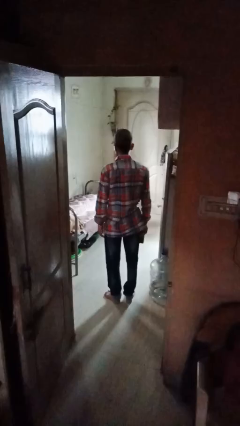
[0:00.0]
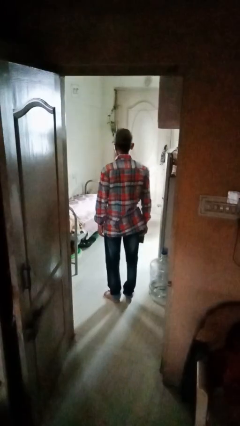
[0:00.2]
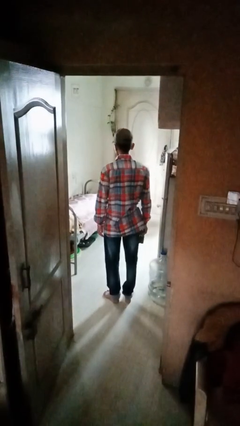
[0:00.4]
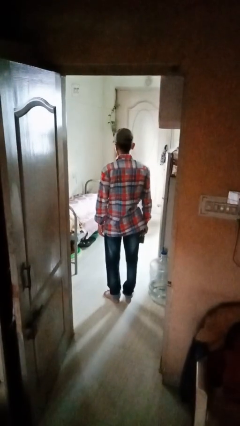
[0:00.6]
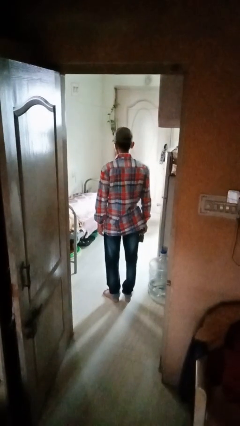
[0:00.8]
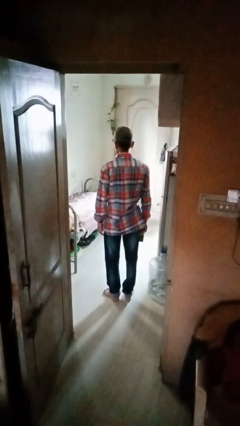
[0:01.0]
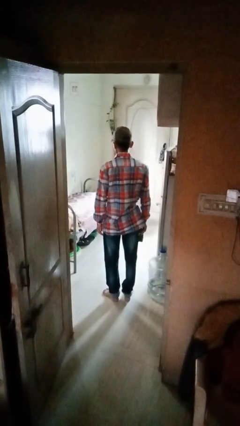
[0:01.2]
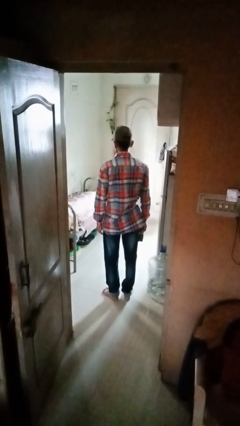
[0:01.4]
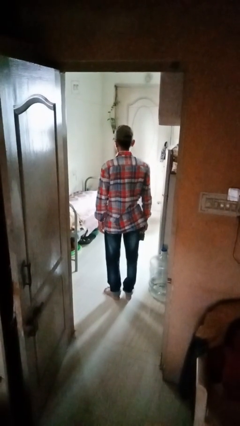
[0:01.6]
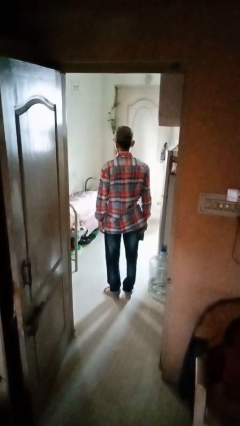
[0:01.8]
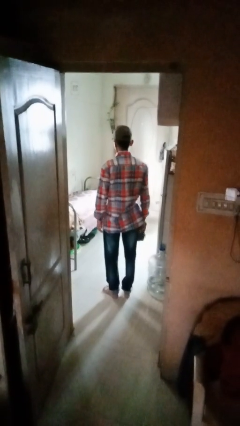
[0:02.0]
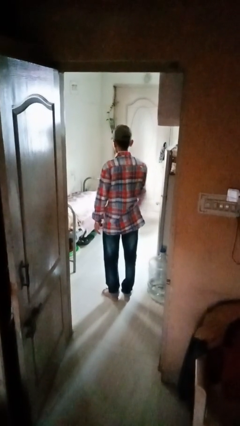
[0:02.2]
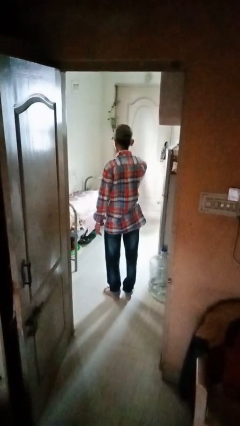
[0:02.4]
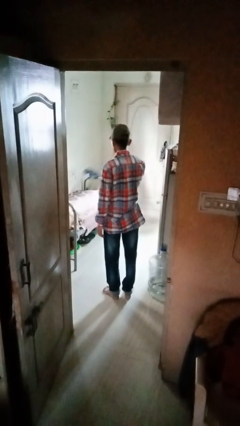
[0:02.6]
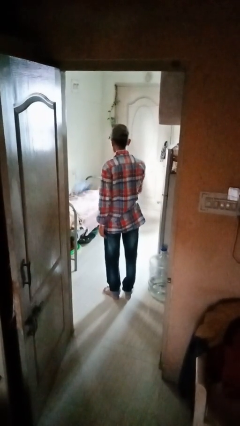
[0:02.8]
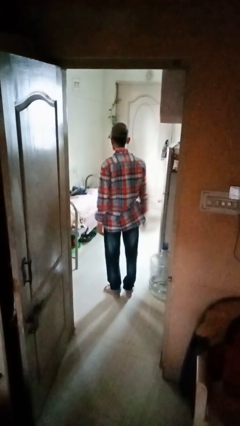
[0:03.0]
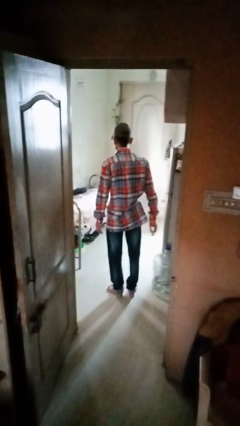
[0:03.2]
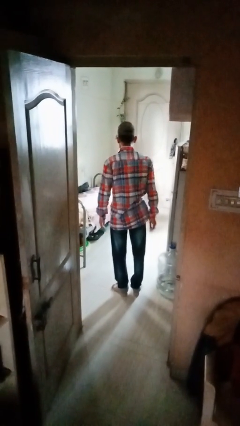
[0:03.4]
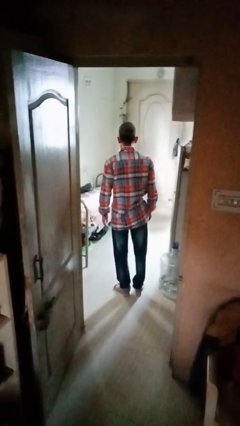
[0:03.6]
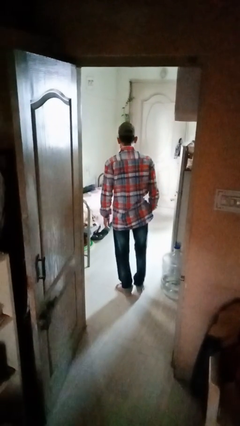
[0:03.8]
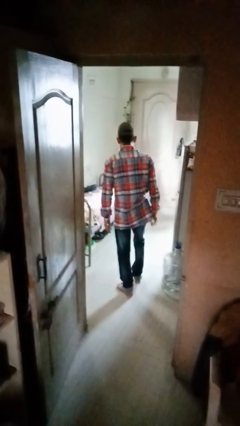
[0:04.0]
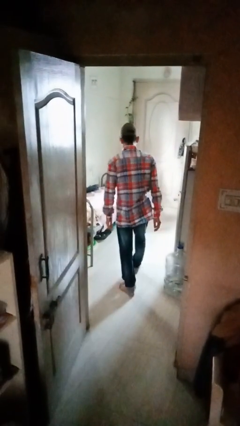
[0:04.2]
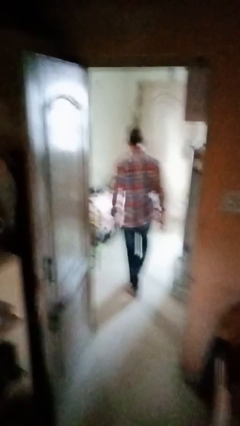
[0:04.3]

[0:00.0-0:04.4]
person throws object on bed

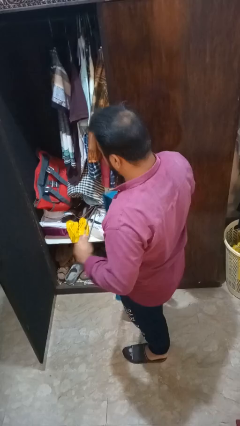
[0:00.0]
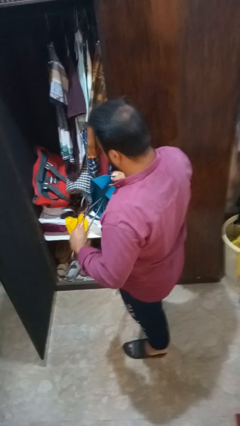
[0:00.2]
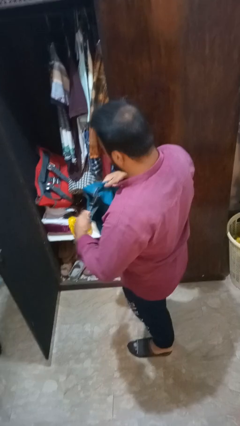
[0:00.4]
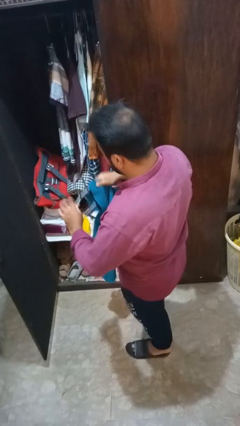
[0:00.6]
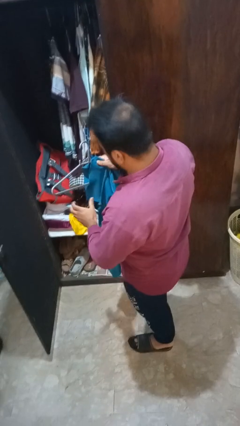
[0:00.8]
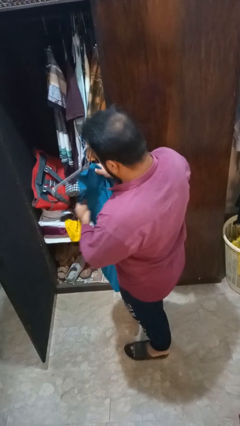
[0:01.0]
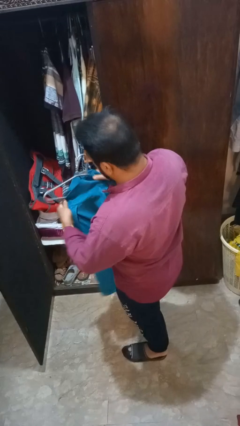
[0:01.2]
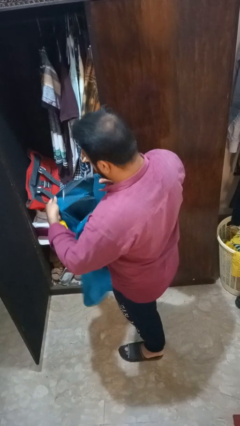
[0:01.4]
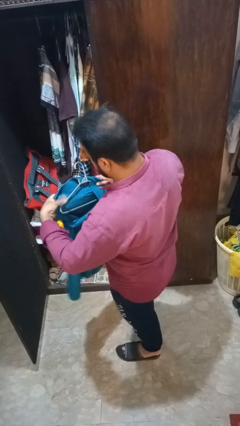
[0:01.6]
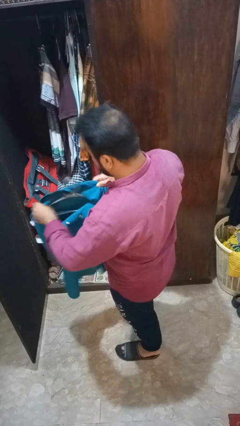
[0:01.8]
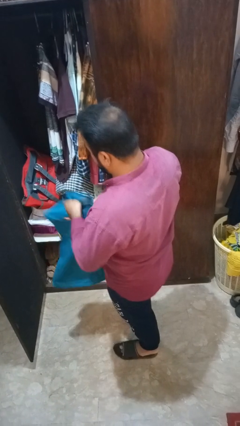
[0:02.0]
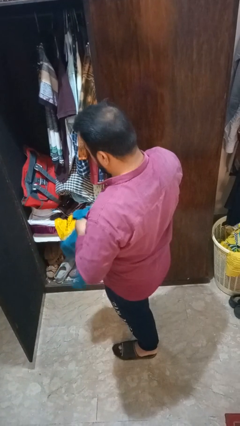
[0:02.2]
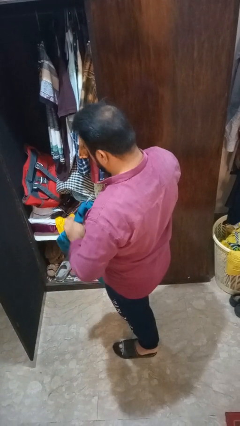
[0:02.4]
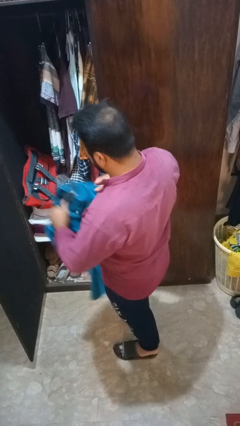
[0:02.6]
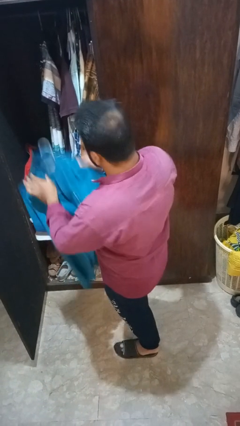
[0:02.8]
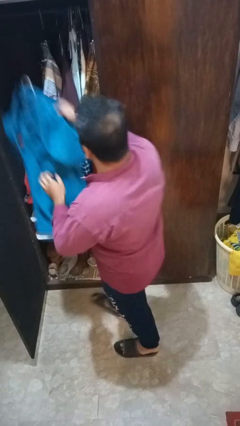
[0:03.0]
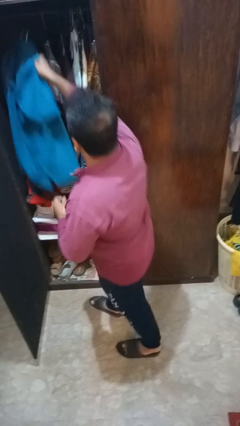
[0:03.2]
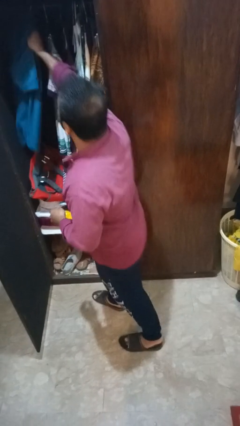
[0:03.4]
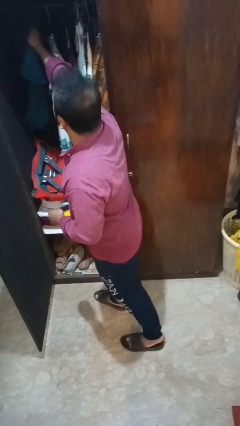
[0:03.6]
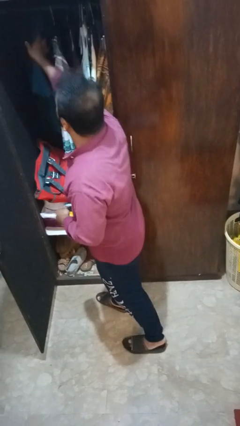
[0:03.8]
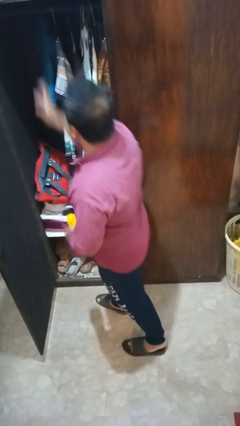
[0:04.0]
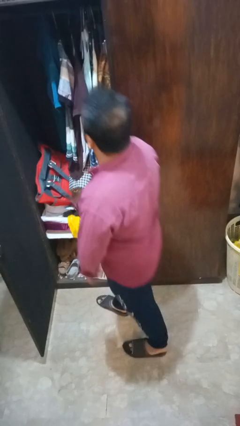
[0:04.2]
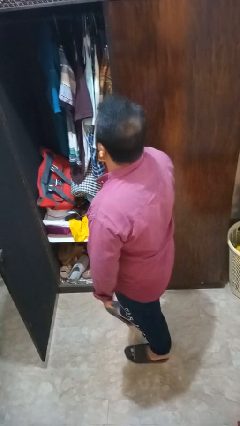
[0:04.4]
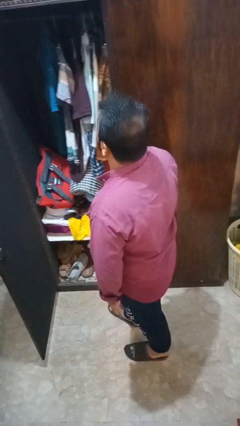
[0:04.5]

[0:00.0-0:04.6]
person puts clothes into closet

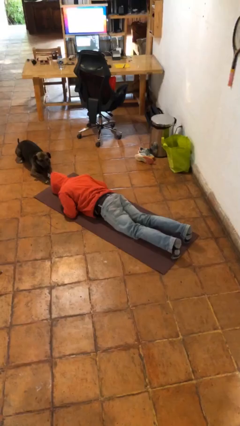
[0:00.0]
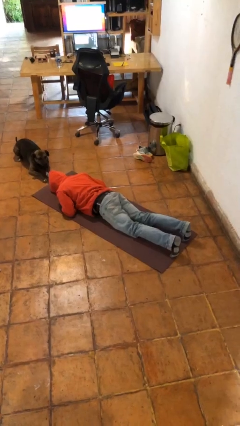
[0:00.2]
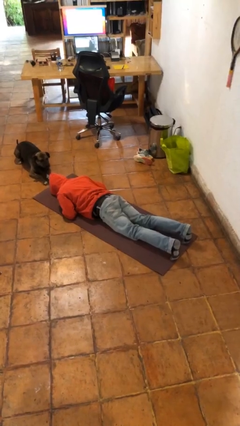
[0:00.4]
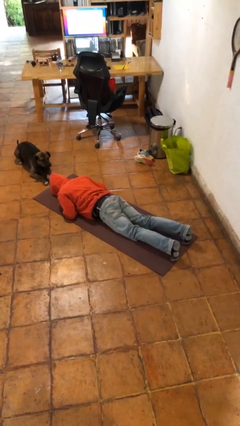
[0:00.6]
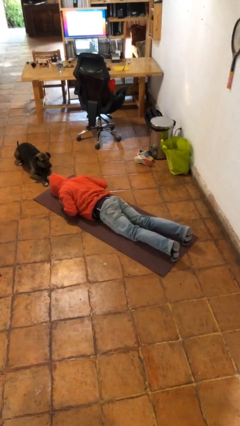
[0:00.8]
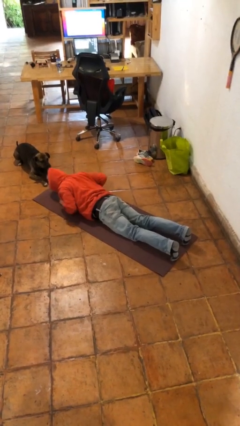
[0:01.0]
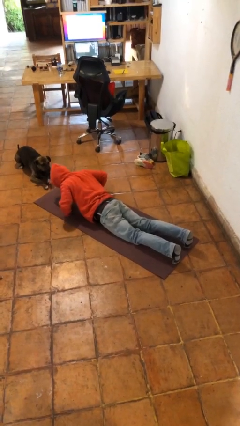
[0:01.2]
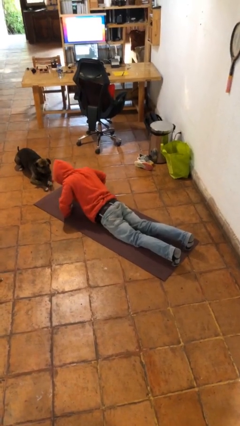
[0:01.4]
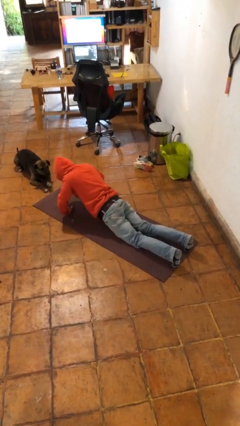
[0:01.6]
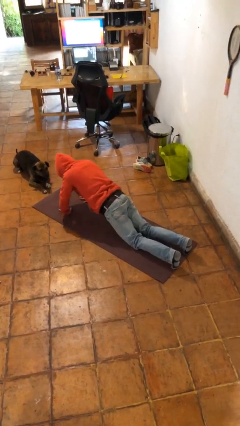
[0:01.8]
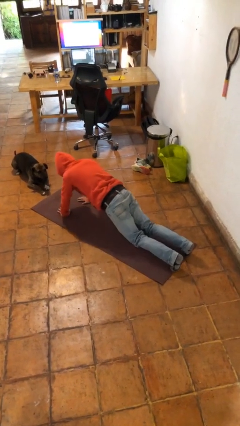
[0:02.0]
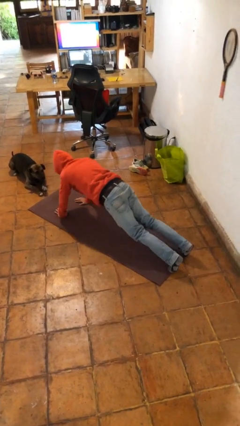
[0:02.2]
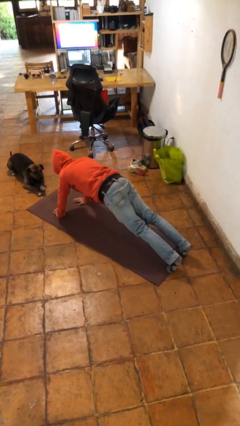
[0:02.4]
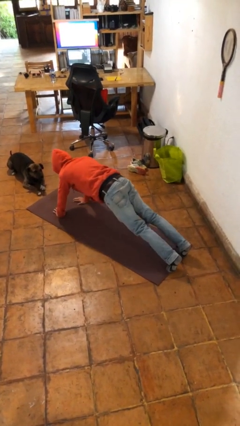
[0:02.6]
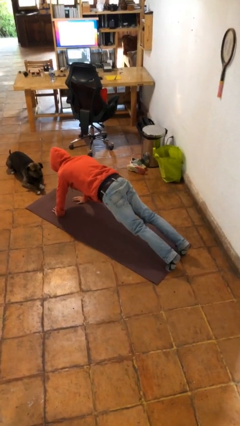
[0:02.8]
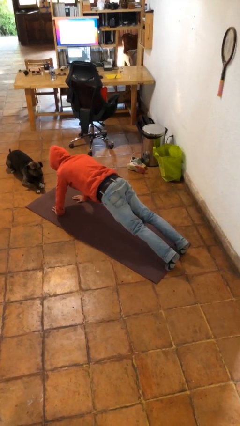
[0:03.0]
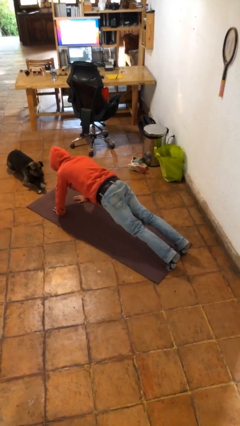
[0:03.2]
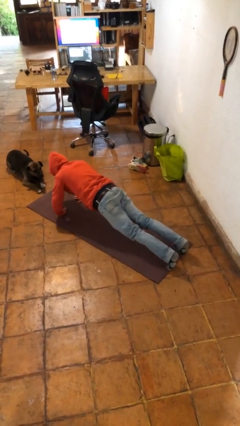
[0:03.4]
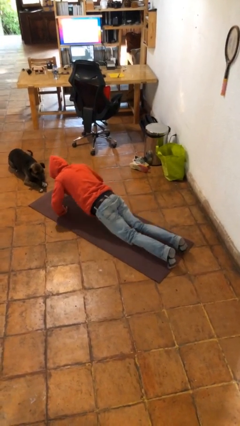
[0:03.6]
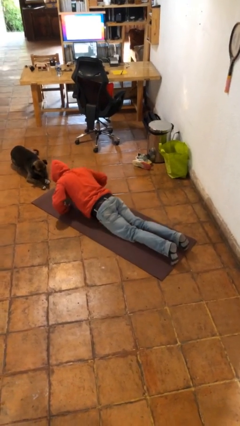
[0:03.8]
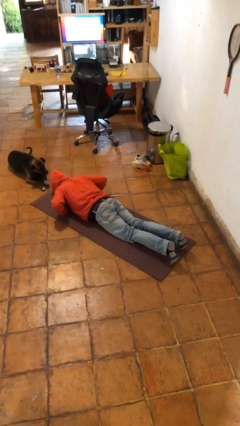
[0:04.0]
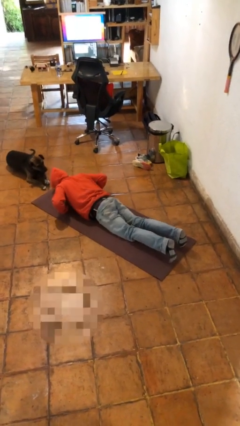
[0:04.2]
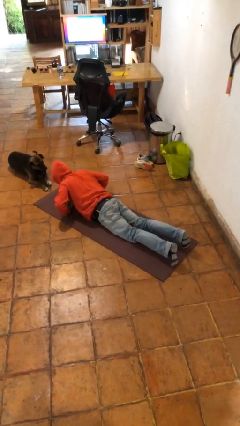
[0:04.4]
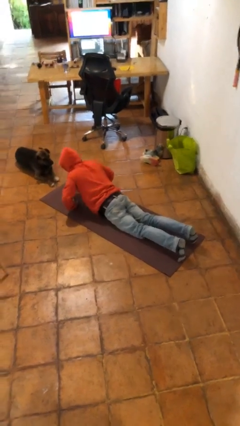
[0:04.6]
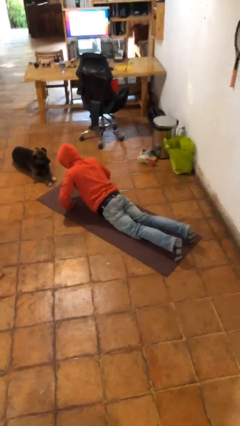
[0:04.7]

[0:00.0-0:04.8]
person exercises with pushup

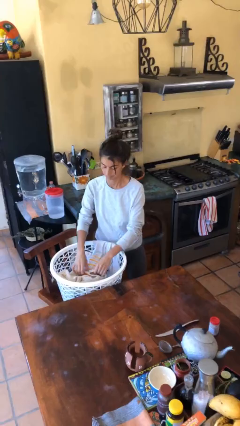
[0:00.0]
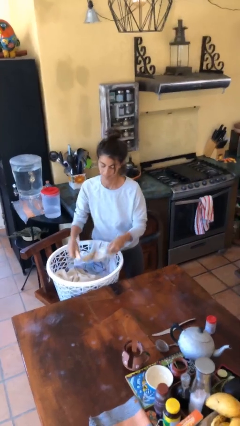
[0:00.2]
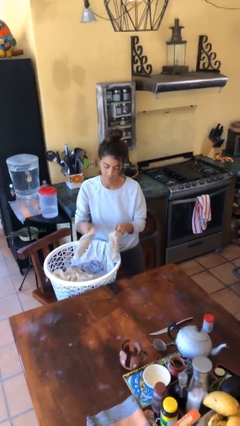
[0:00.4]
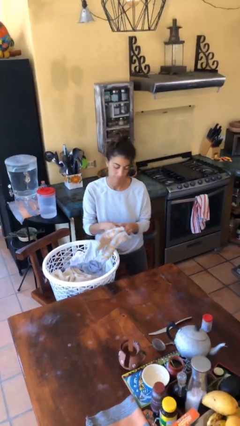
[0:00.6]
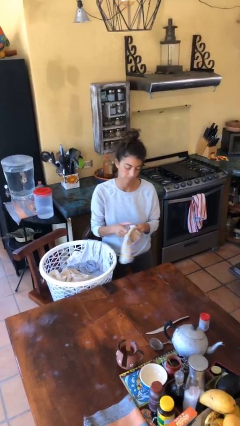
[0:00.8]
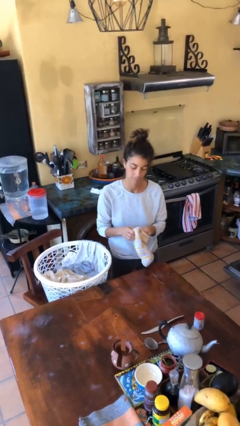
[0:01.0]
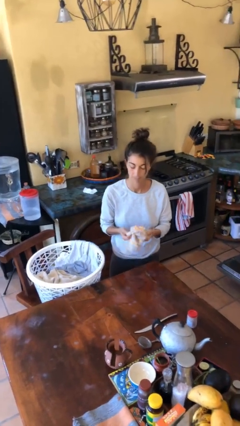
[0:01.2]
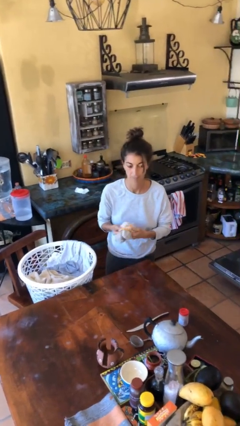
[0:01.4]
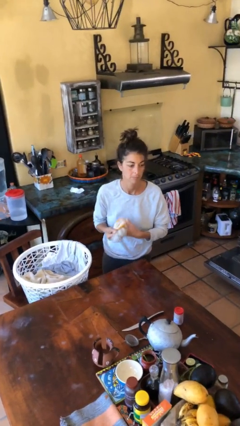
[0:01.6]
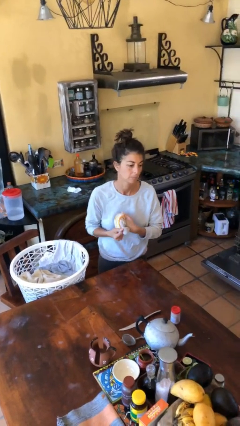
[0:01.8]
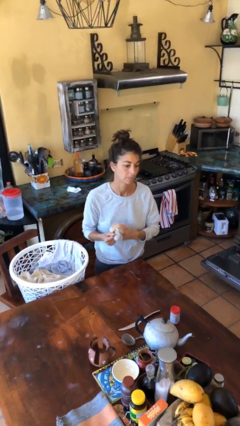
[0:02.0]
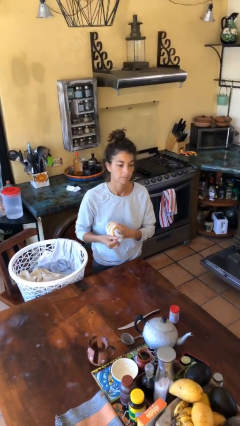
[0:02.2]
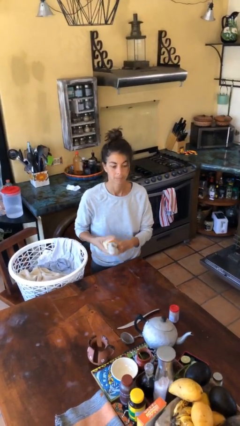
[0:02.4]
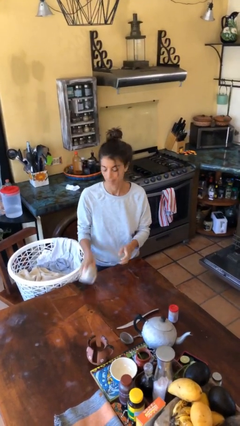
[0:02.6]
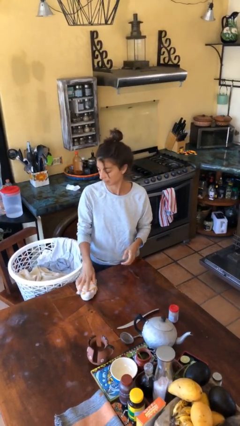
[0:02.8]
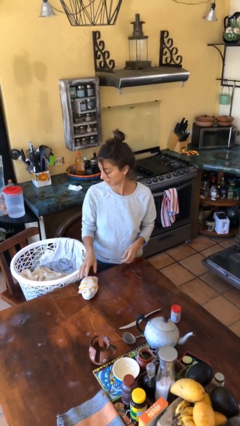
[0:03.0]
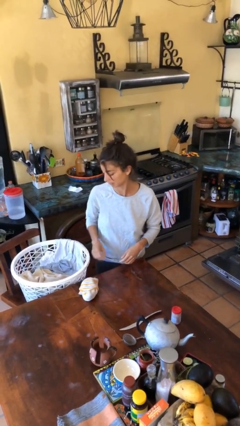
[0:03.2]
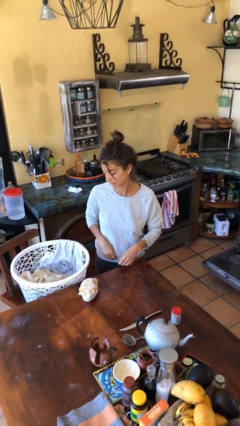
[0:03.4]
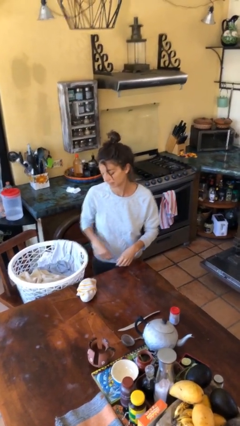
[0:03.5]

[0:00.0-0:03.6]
person folds socks

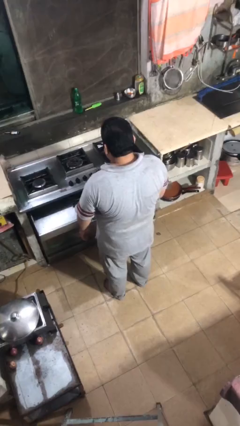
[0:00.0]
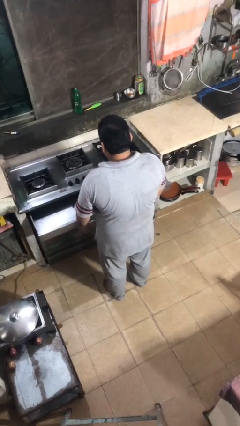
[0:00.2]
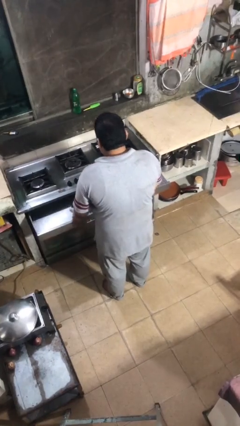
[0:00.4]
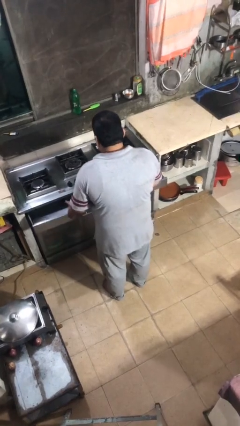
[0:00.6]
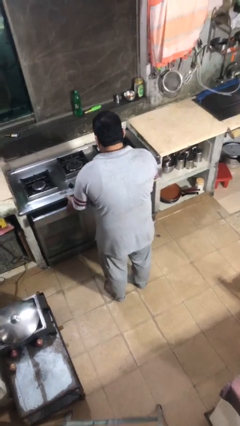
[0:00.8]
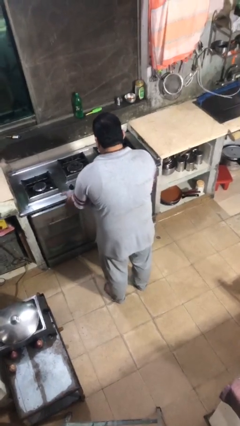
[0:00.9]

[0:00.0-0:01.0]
person closes kitchen drawer
